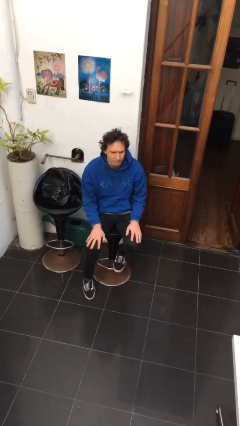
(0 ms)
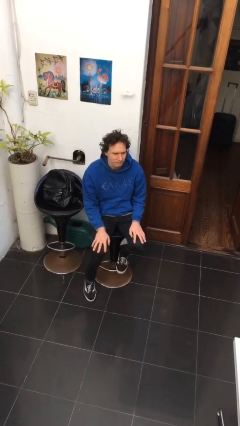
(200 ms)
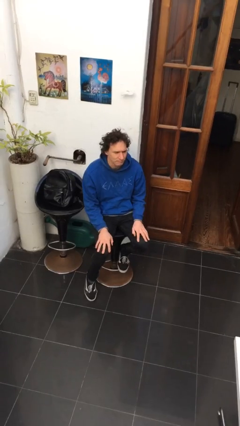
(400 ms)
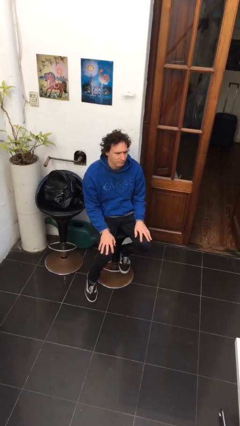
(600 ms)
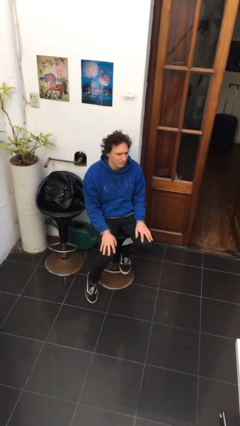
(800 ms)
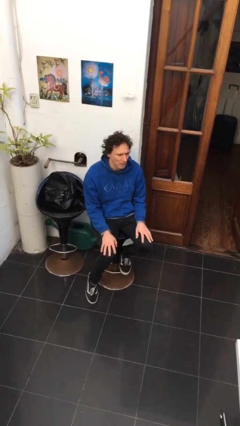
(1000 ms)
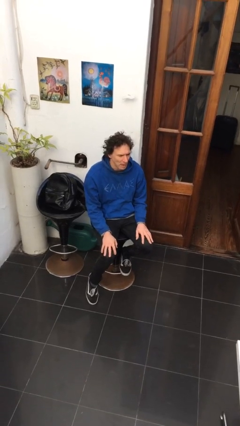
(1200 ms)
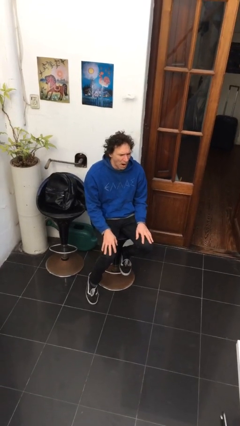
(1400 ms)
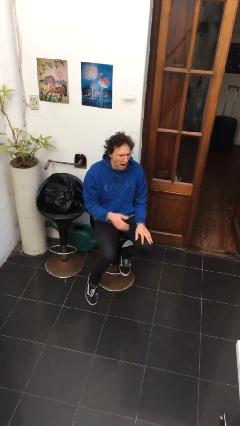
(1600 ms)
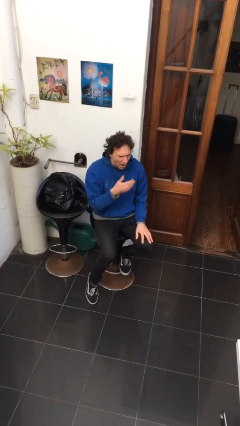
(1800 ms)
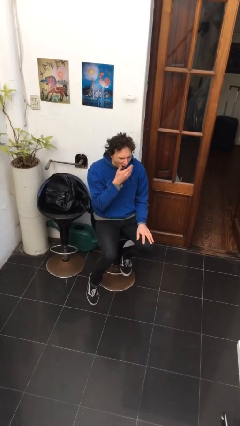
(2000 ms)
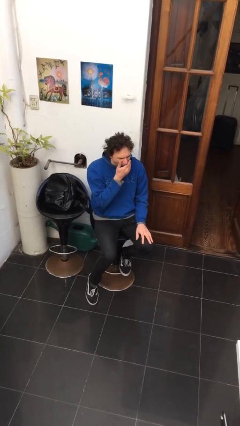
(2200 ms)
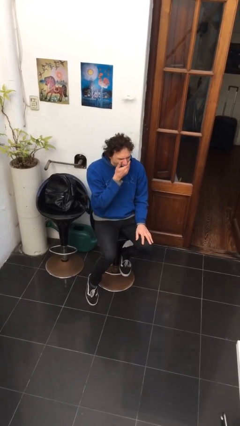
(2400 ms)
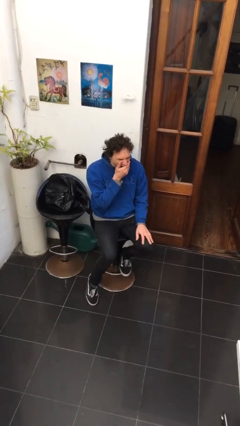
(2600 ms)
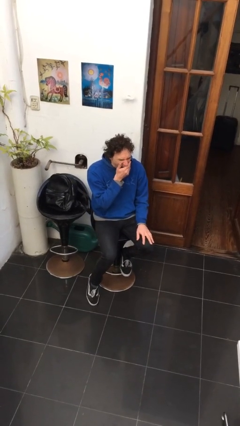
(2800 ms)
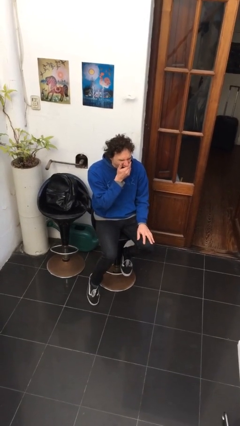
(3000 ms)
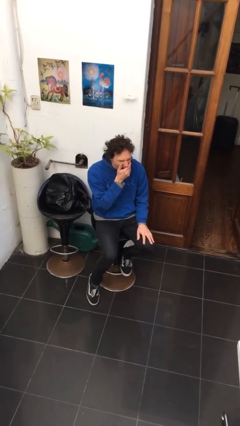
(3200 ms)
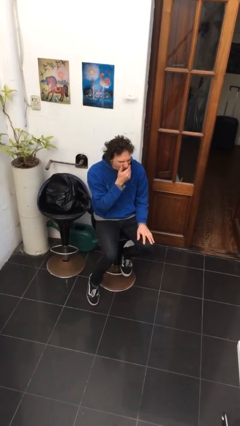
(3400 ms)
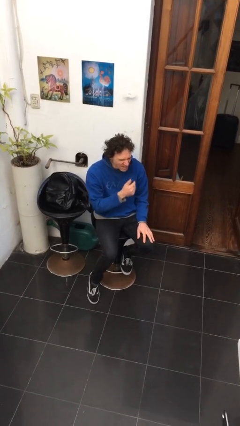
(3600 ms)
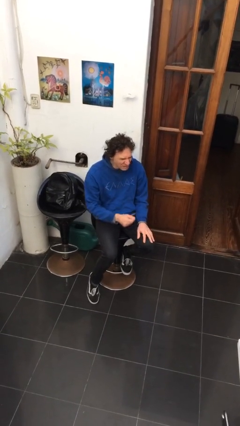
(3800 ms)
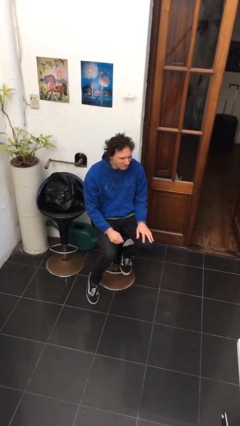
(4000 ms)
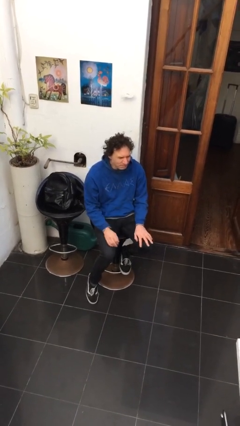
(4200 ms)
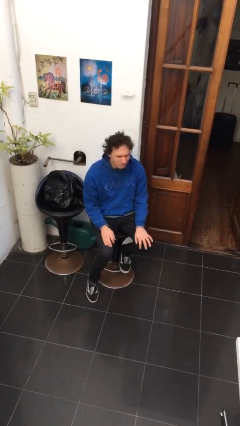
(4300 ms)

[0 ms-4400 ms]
person yawns

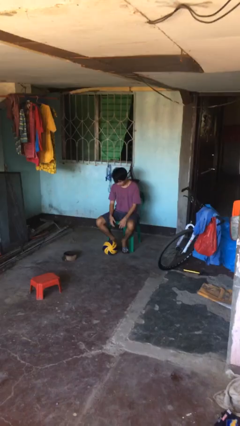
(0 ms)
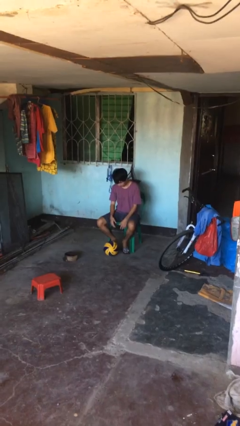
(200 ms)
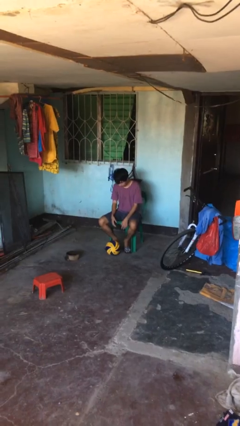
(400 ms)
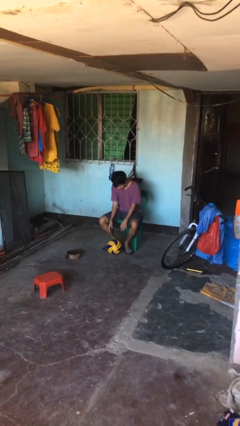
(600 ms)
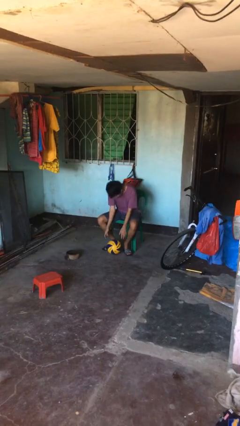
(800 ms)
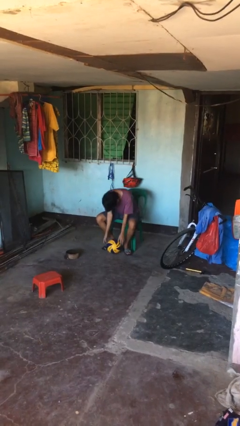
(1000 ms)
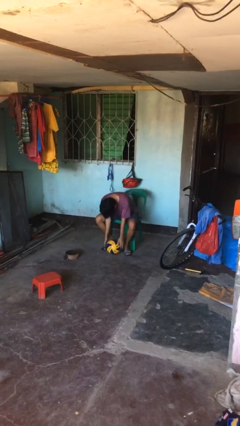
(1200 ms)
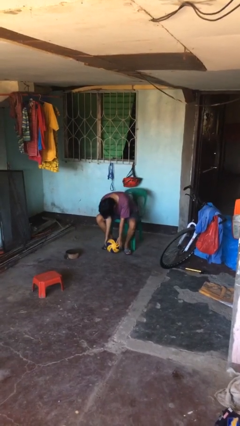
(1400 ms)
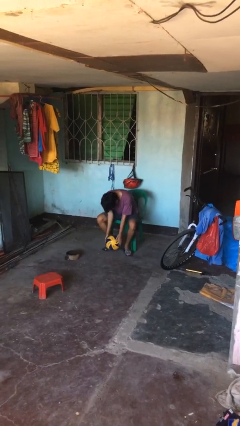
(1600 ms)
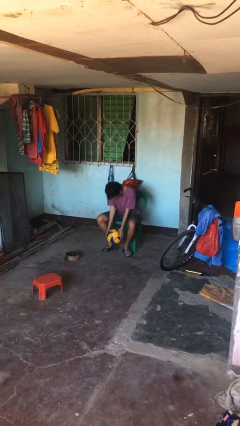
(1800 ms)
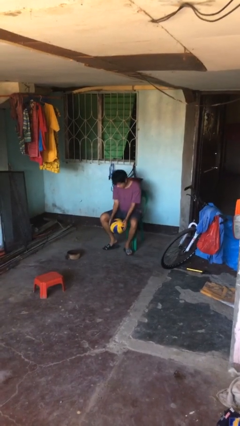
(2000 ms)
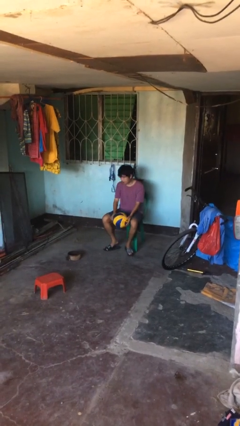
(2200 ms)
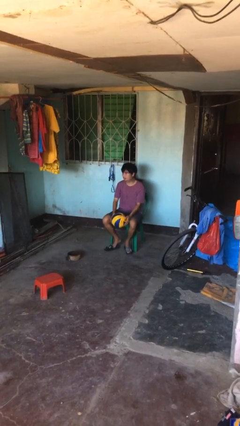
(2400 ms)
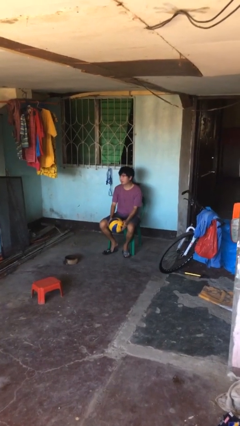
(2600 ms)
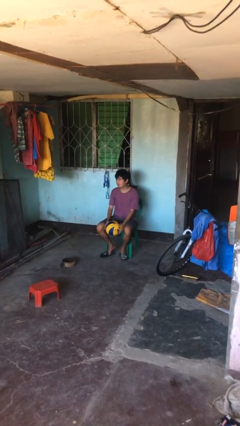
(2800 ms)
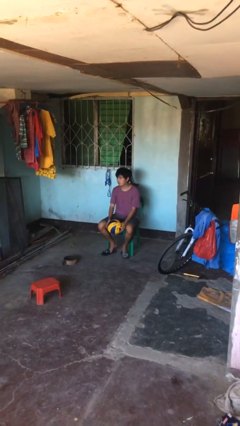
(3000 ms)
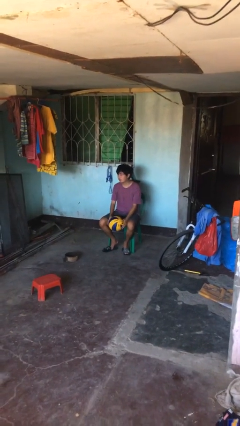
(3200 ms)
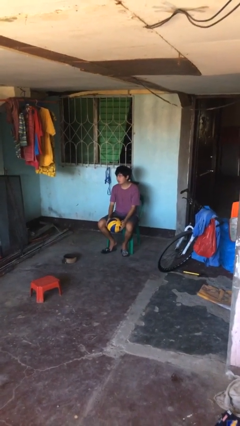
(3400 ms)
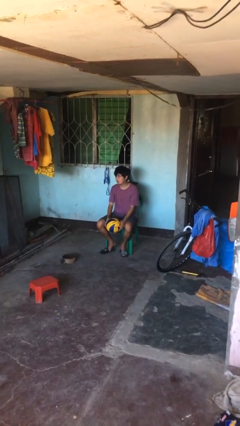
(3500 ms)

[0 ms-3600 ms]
person picks up object from floor

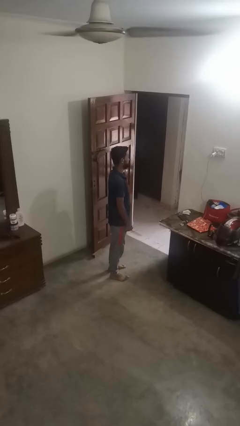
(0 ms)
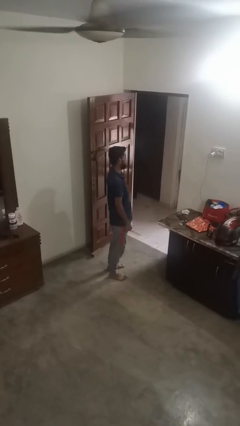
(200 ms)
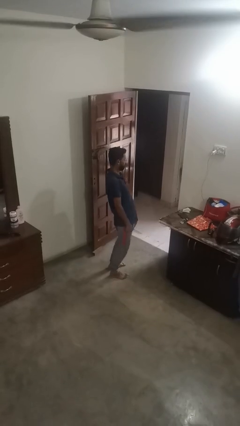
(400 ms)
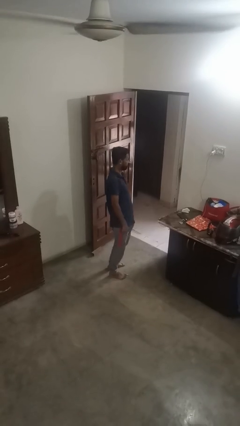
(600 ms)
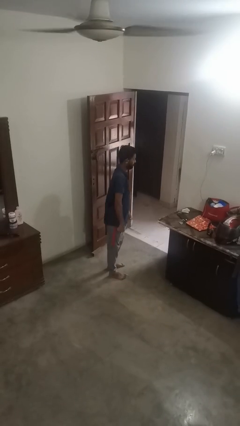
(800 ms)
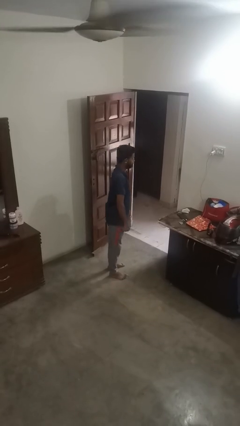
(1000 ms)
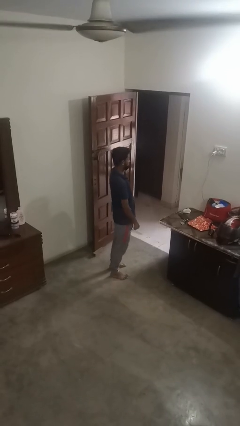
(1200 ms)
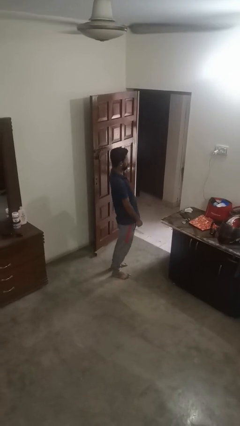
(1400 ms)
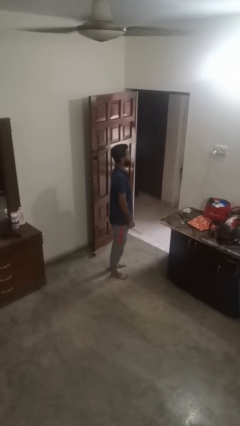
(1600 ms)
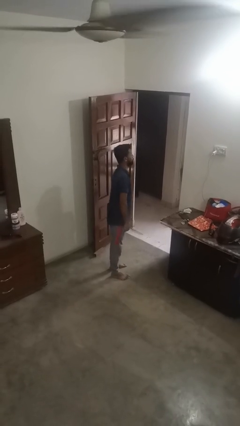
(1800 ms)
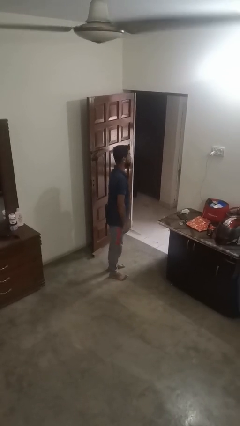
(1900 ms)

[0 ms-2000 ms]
person wiggles hips

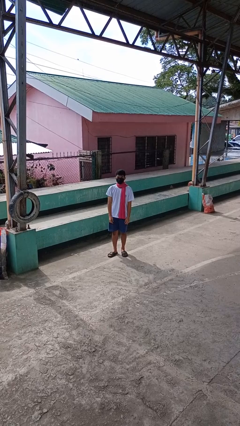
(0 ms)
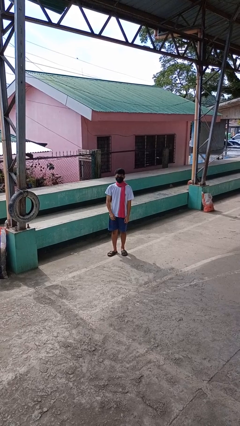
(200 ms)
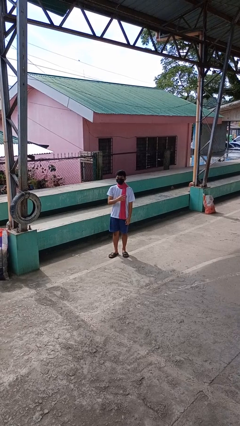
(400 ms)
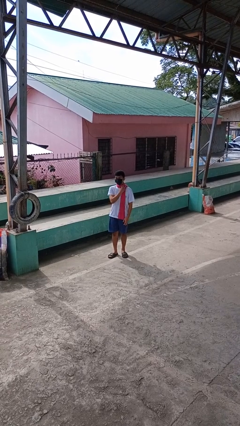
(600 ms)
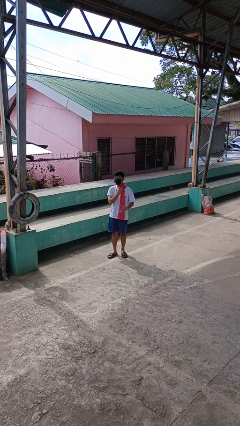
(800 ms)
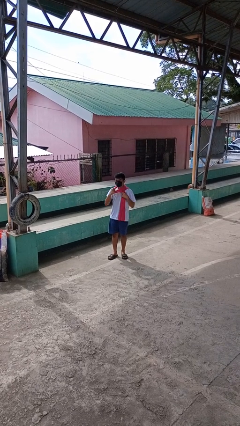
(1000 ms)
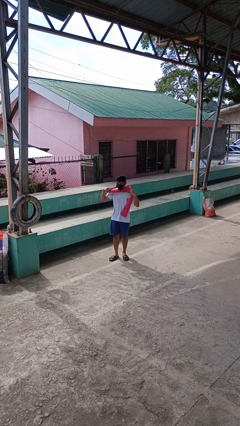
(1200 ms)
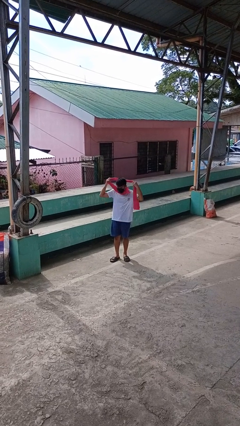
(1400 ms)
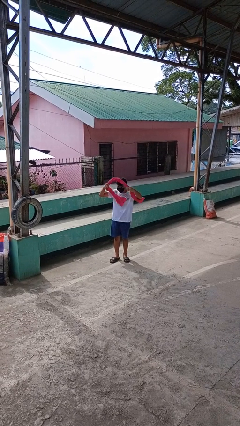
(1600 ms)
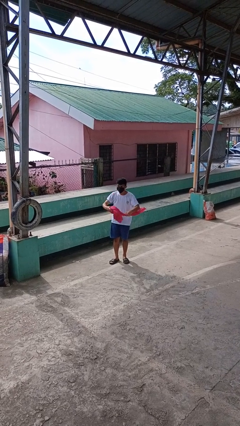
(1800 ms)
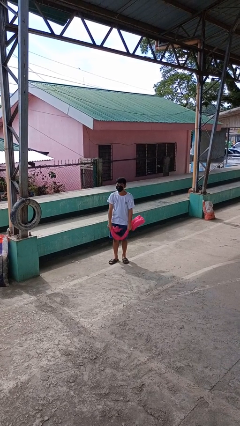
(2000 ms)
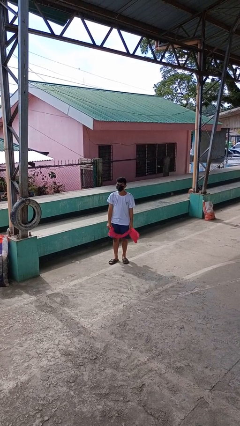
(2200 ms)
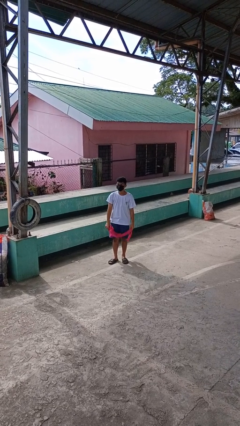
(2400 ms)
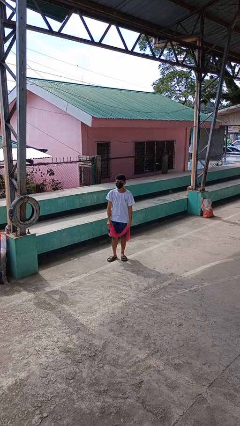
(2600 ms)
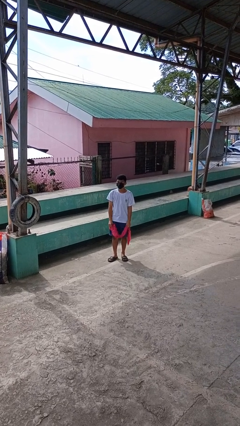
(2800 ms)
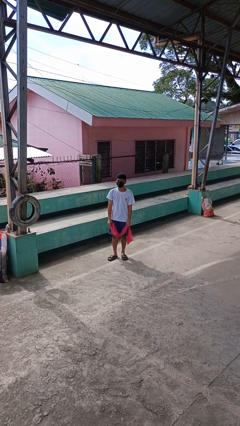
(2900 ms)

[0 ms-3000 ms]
person takes off scarf

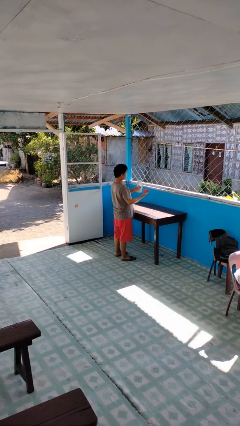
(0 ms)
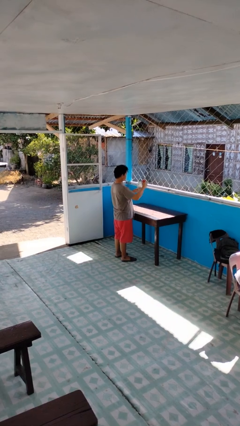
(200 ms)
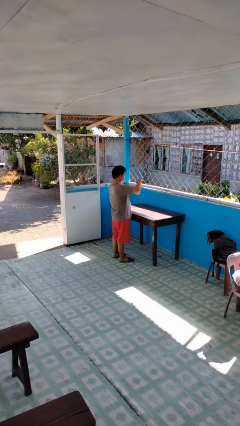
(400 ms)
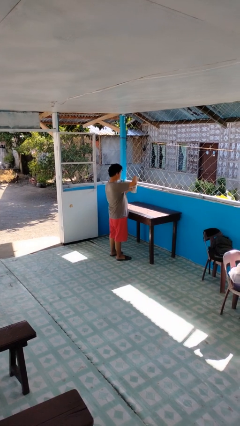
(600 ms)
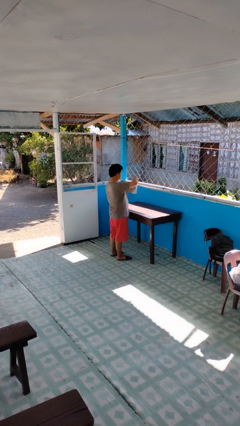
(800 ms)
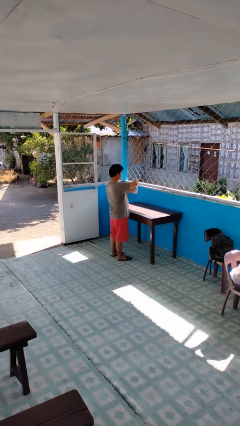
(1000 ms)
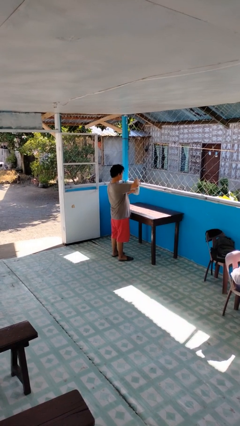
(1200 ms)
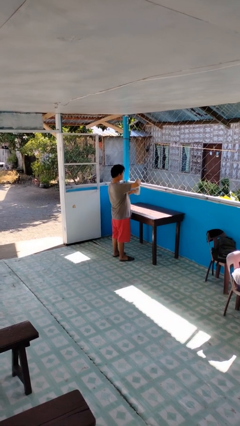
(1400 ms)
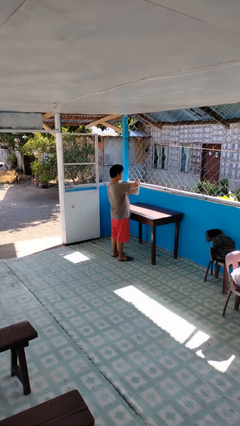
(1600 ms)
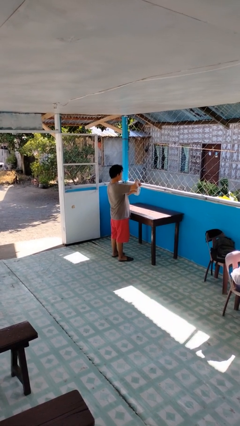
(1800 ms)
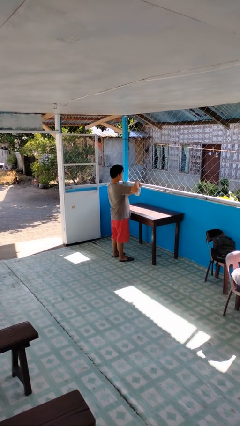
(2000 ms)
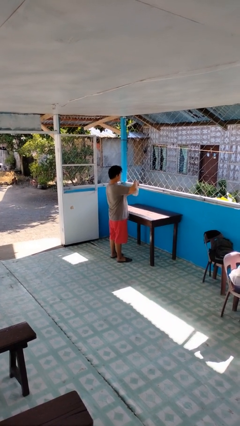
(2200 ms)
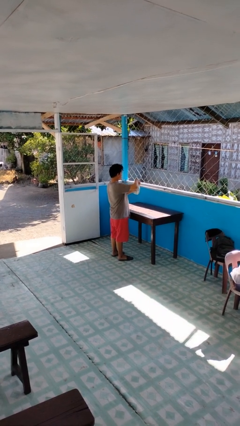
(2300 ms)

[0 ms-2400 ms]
person closes jar

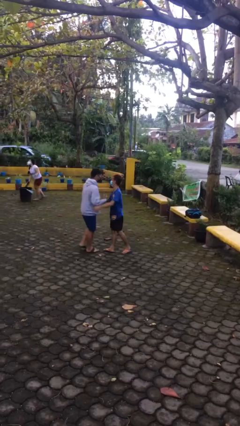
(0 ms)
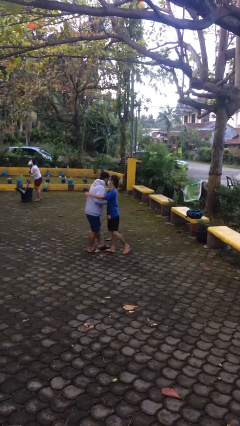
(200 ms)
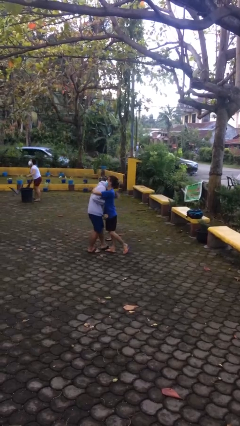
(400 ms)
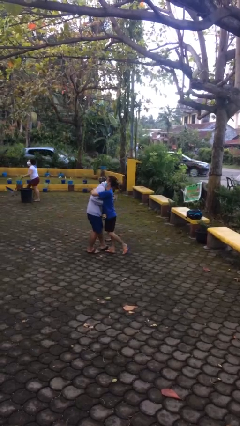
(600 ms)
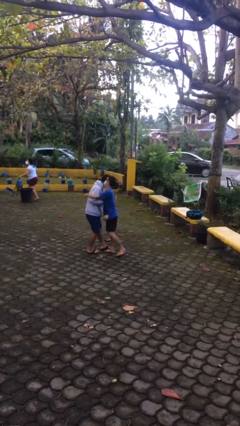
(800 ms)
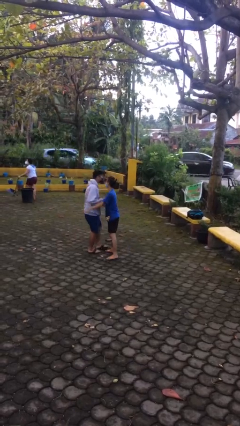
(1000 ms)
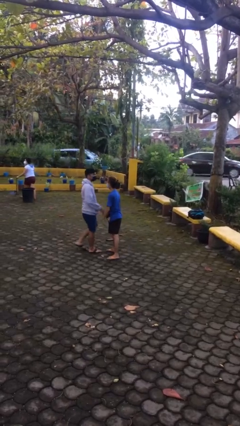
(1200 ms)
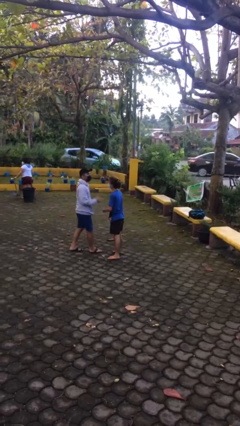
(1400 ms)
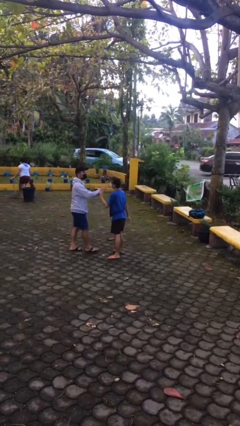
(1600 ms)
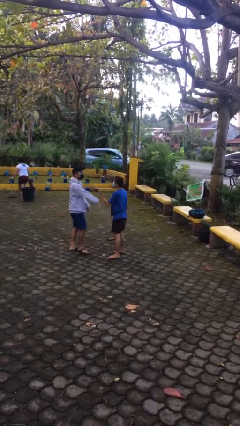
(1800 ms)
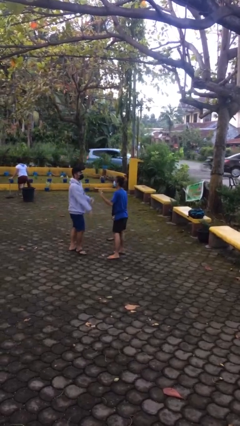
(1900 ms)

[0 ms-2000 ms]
person embraces person
